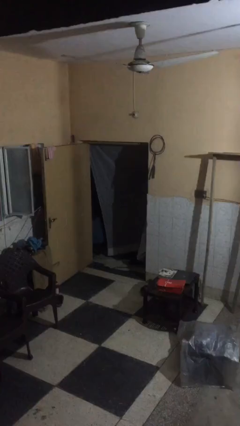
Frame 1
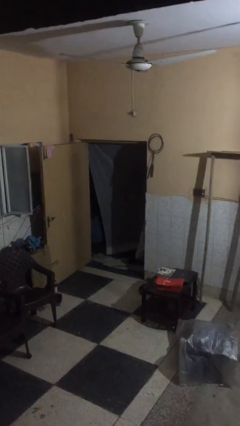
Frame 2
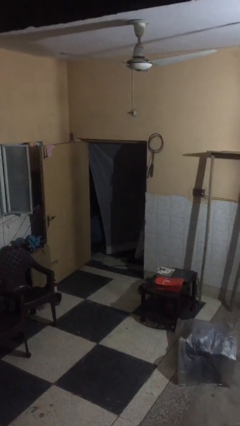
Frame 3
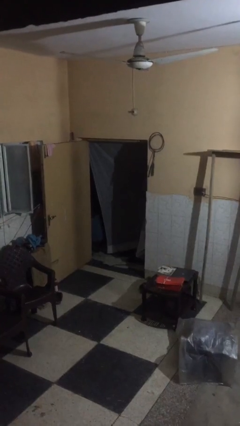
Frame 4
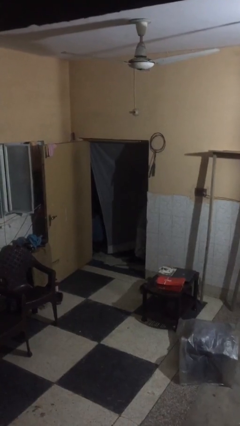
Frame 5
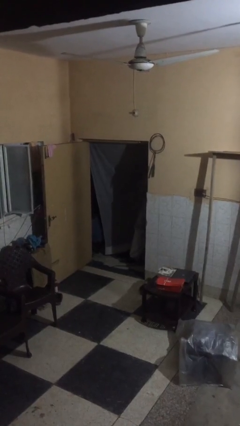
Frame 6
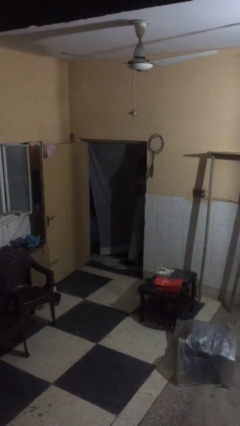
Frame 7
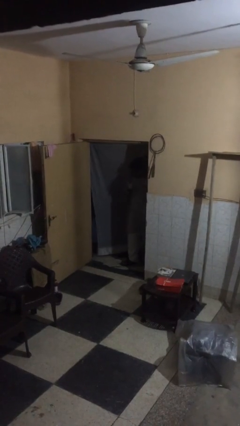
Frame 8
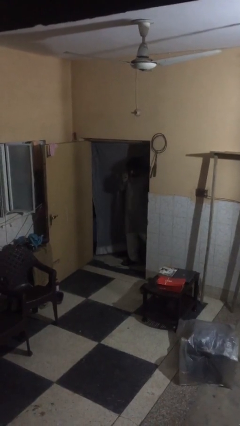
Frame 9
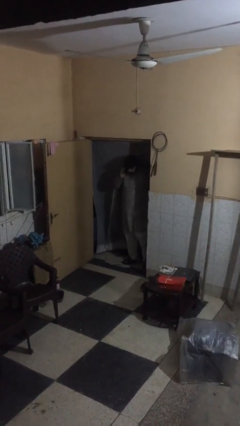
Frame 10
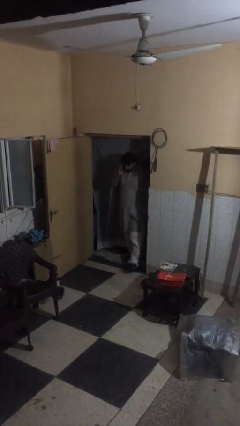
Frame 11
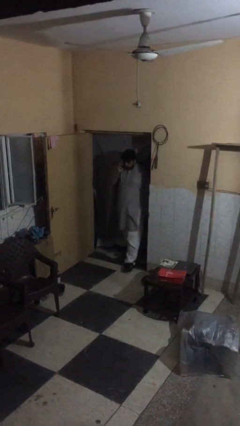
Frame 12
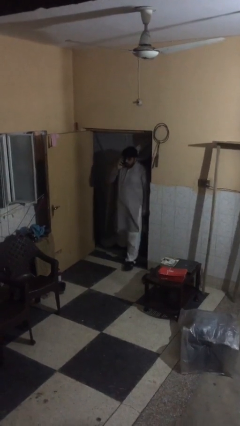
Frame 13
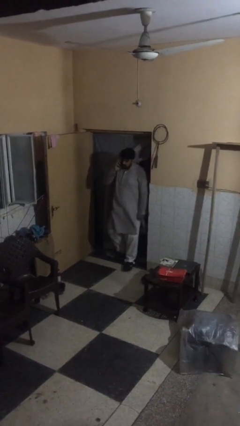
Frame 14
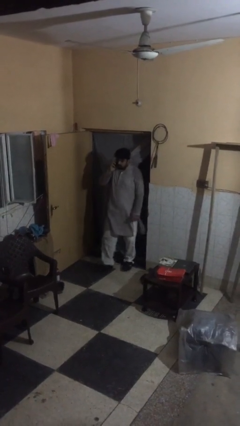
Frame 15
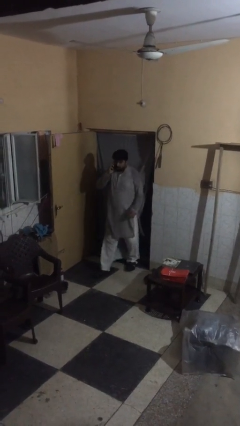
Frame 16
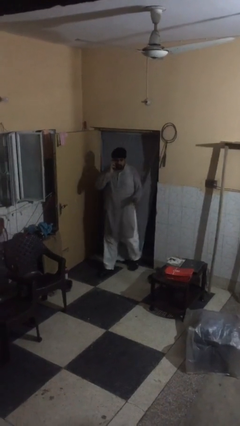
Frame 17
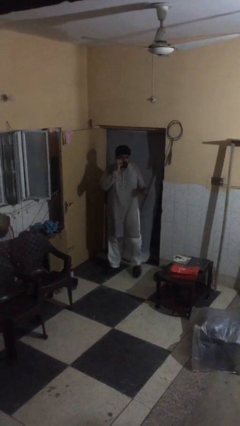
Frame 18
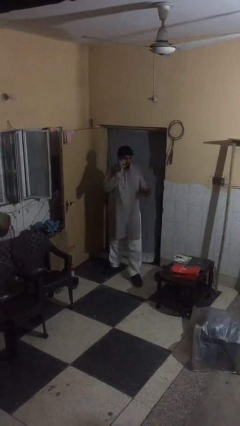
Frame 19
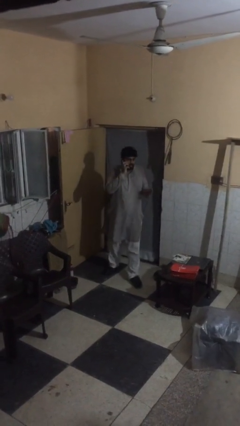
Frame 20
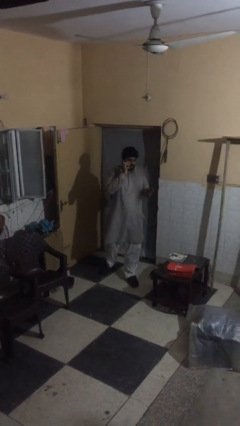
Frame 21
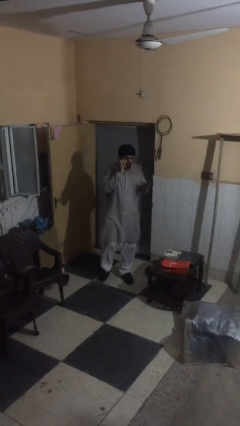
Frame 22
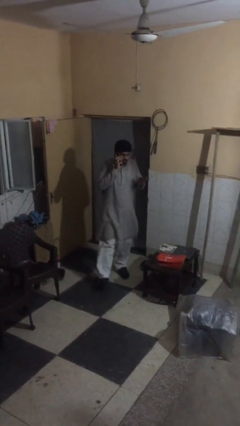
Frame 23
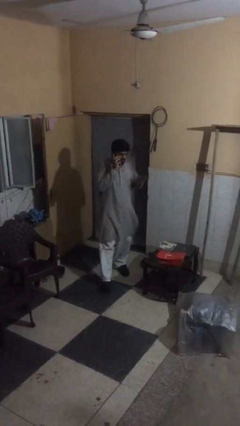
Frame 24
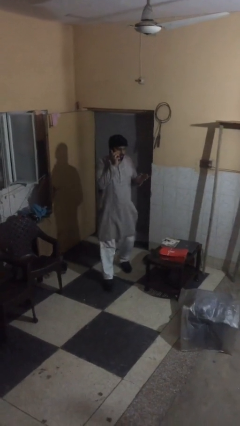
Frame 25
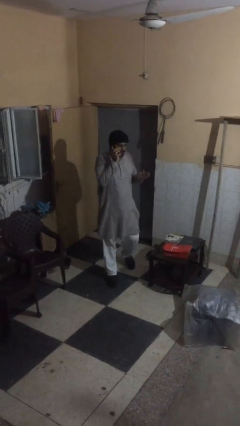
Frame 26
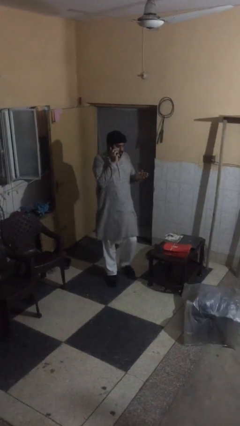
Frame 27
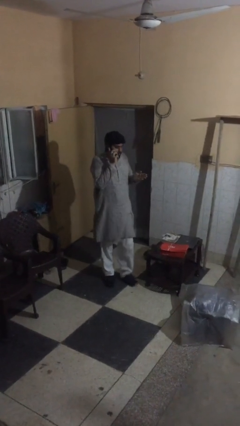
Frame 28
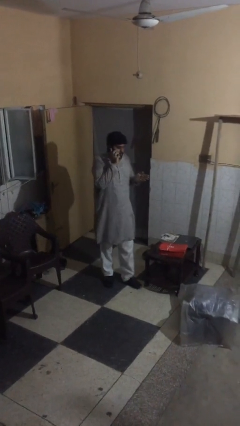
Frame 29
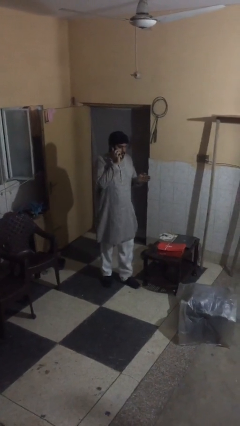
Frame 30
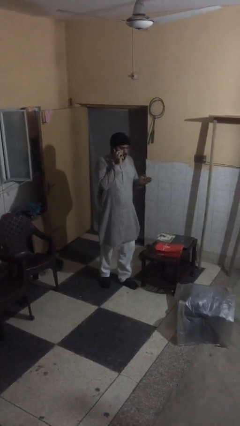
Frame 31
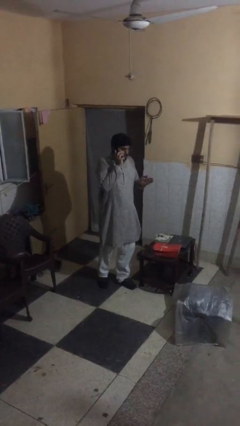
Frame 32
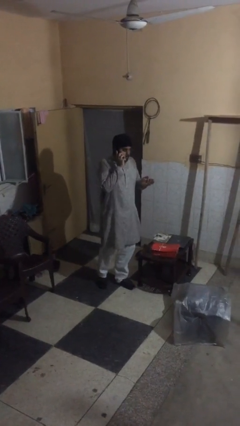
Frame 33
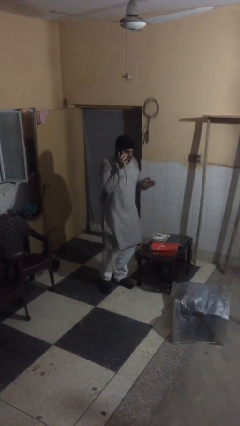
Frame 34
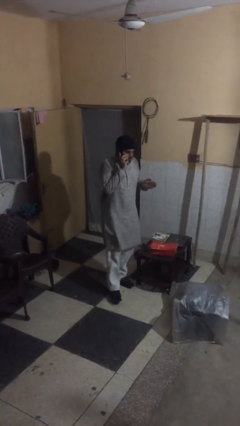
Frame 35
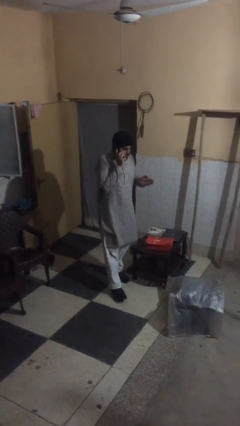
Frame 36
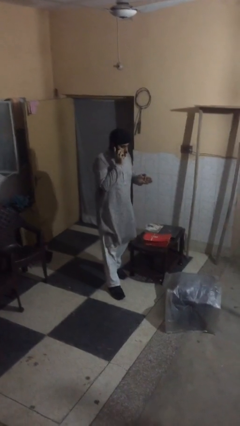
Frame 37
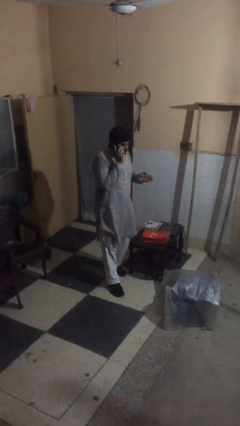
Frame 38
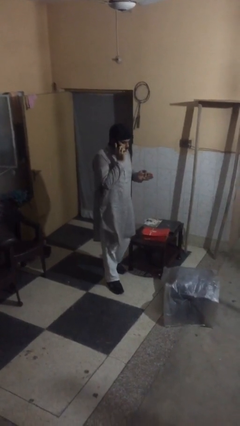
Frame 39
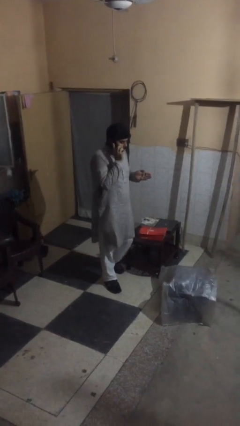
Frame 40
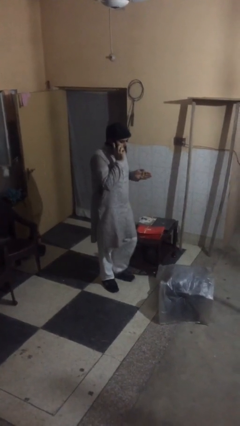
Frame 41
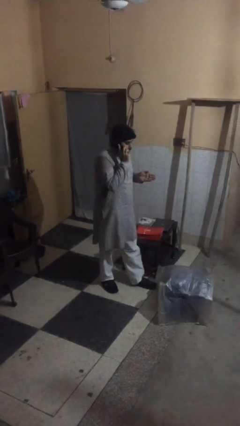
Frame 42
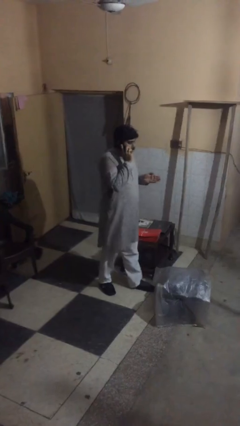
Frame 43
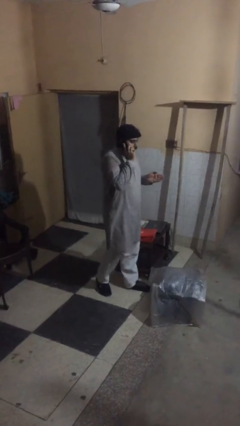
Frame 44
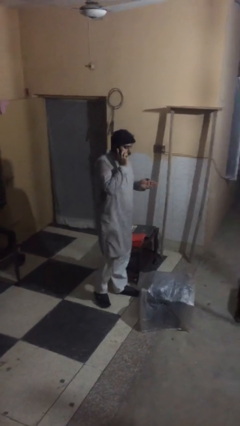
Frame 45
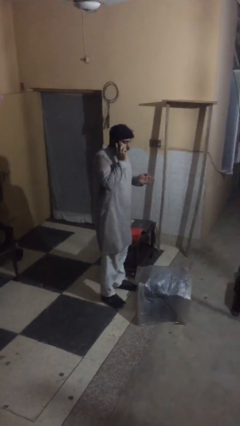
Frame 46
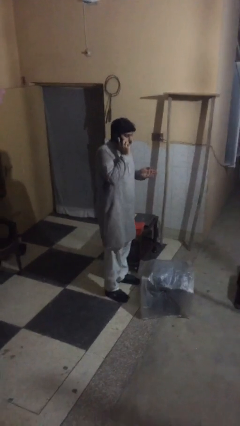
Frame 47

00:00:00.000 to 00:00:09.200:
person enters scene through structure

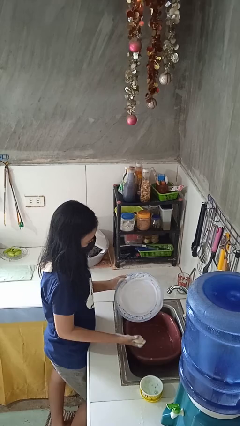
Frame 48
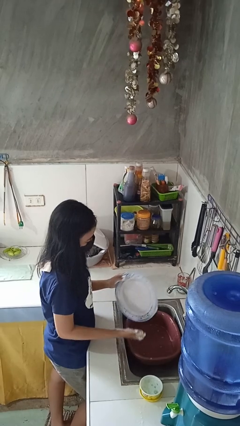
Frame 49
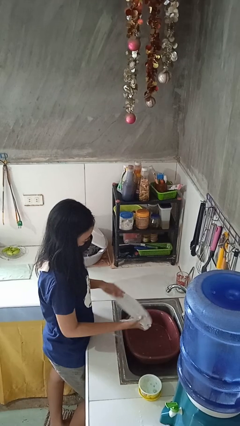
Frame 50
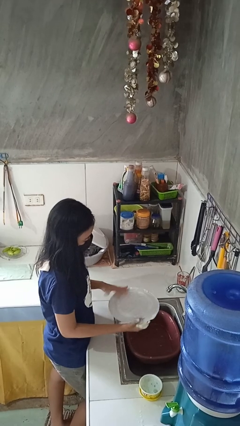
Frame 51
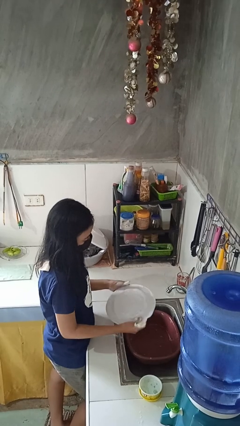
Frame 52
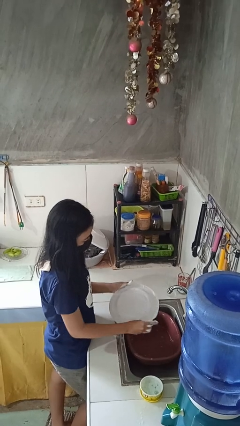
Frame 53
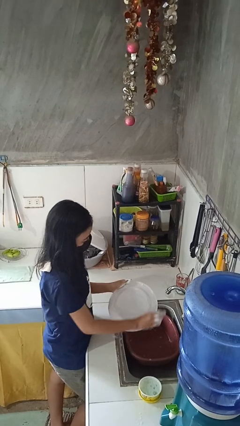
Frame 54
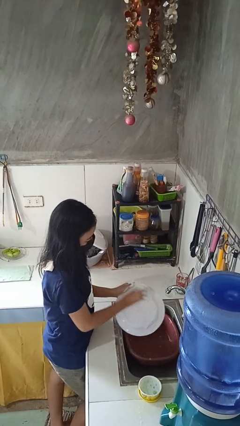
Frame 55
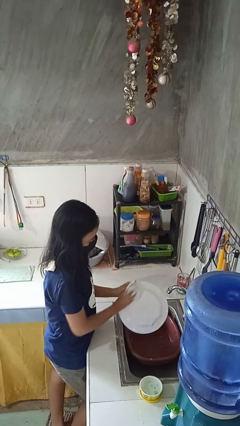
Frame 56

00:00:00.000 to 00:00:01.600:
person washes dish

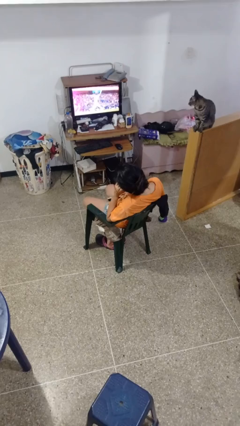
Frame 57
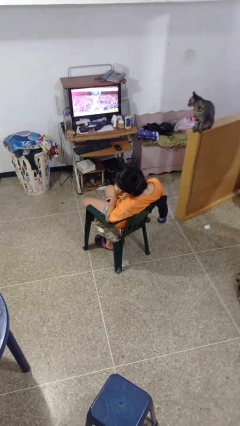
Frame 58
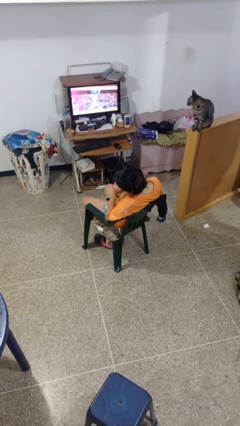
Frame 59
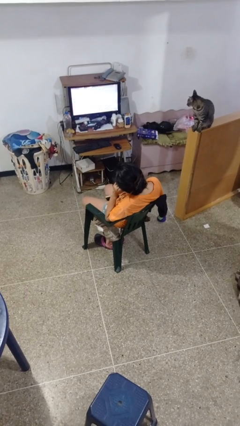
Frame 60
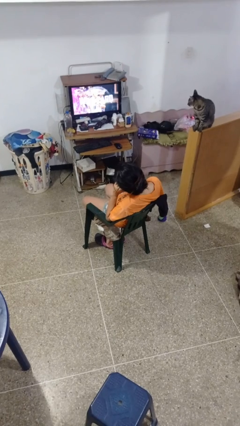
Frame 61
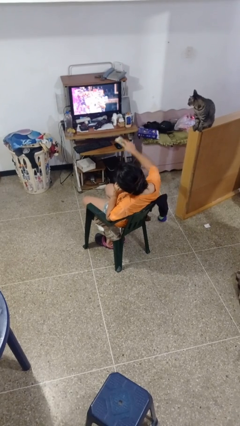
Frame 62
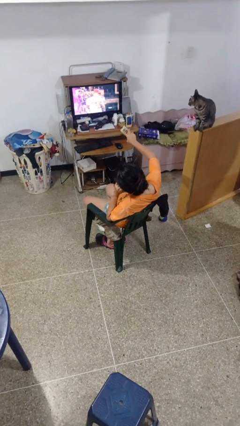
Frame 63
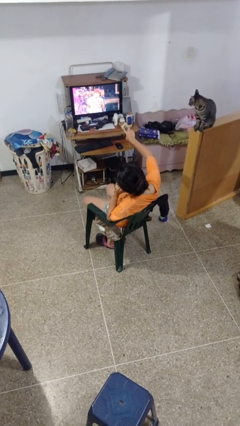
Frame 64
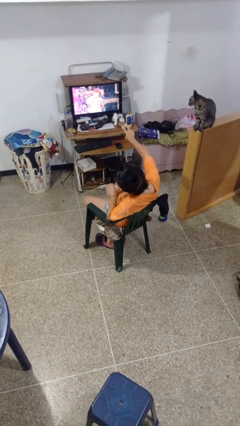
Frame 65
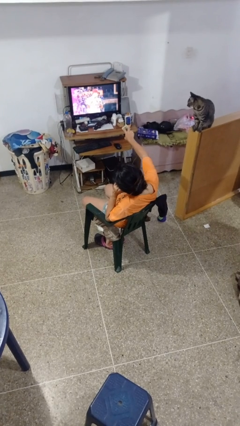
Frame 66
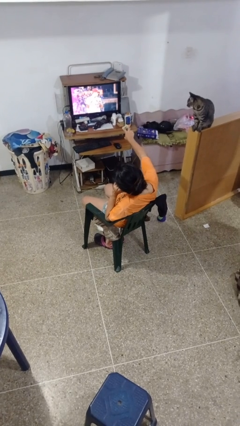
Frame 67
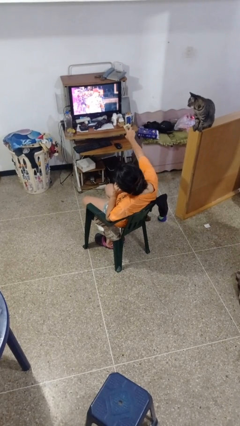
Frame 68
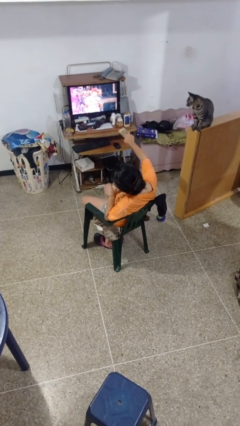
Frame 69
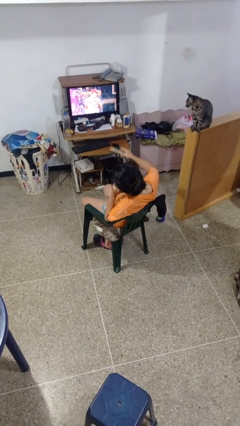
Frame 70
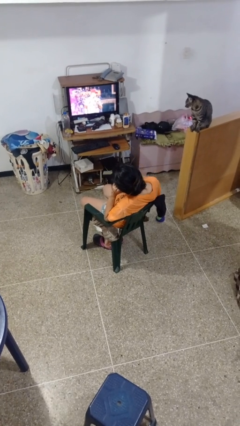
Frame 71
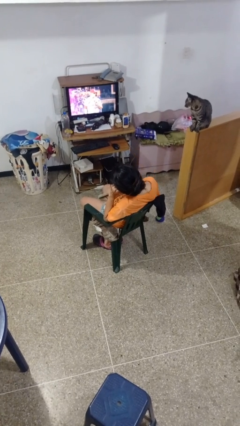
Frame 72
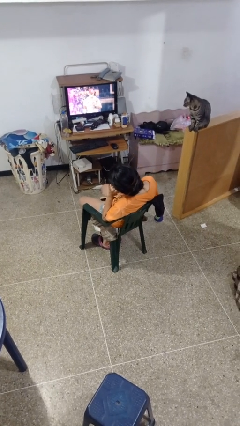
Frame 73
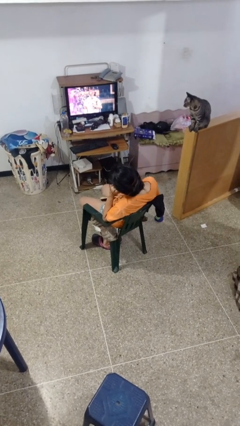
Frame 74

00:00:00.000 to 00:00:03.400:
person uses television remote

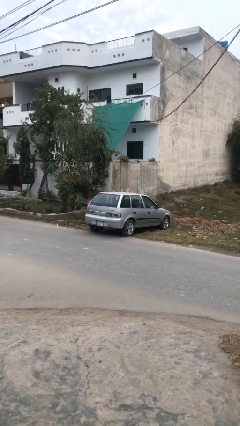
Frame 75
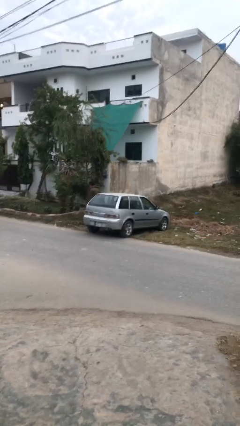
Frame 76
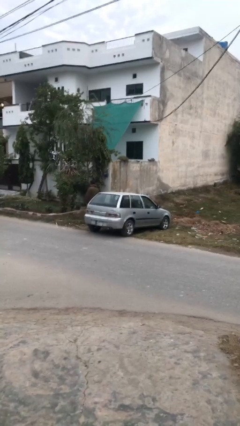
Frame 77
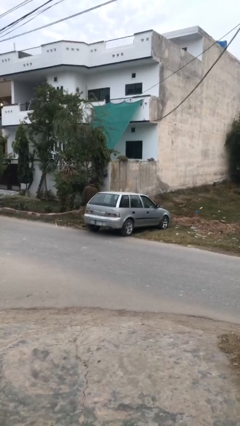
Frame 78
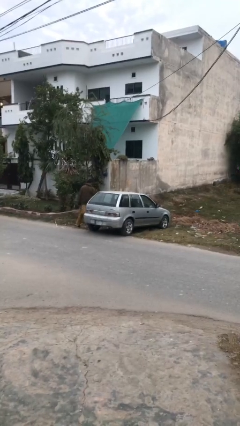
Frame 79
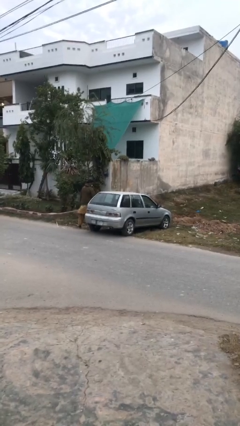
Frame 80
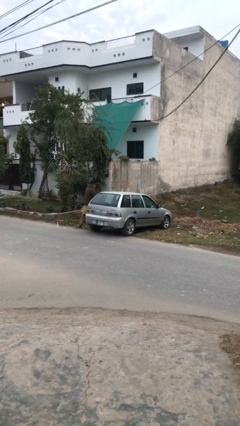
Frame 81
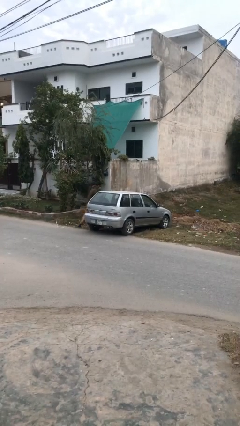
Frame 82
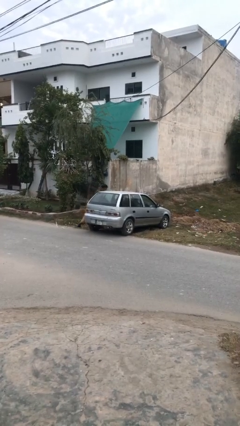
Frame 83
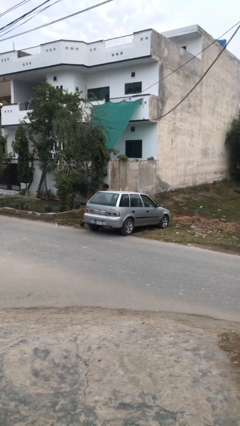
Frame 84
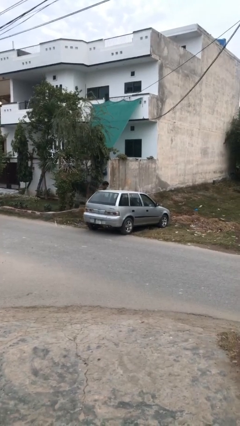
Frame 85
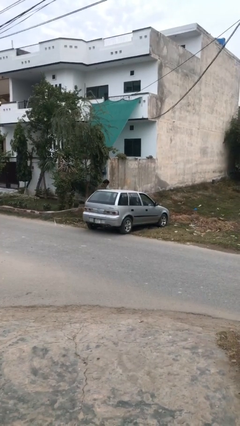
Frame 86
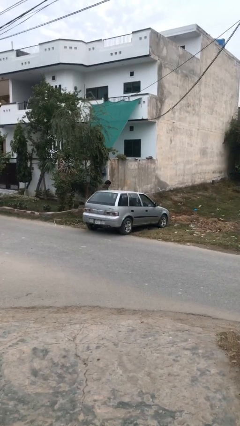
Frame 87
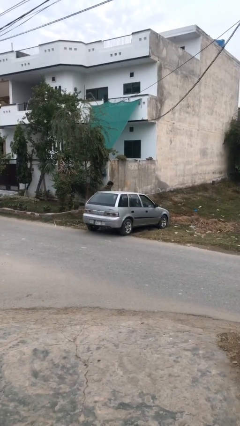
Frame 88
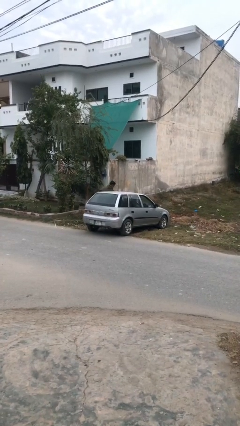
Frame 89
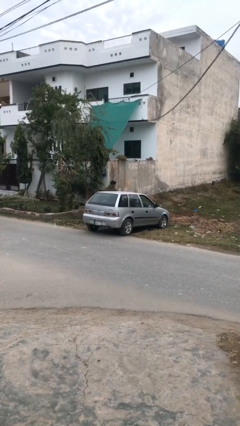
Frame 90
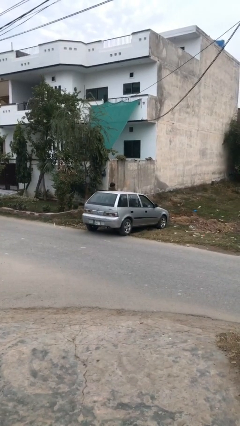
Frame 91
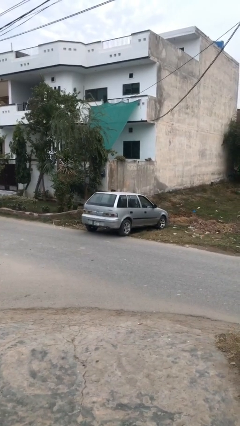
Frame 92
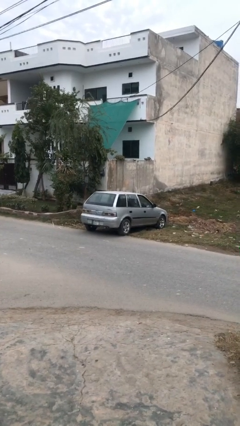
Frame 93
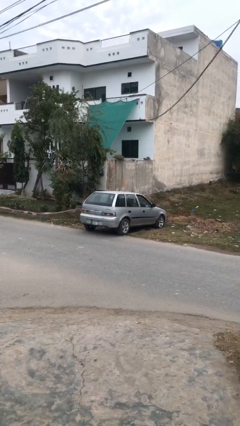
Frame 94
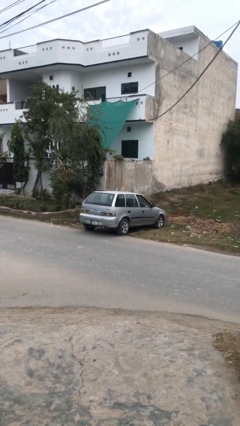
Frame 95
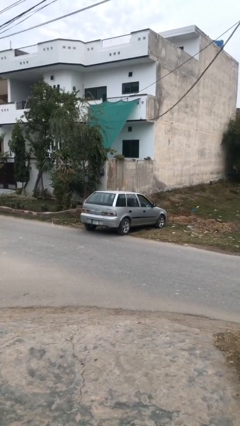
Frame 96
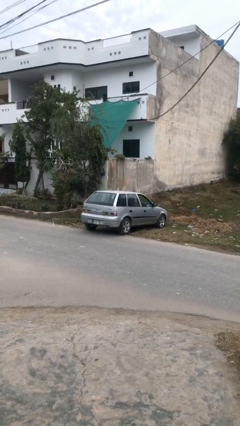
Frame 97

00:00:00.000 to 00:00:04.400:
car picks up person
